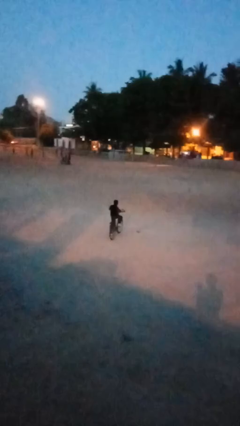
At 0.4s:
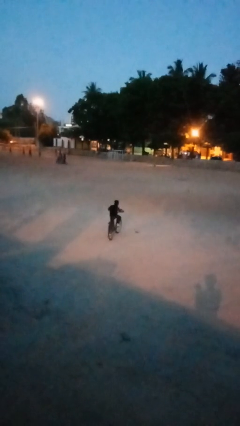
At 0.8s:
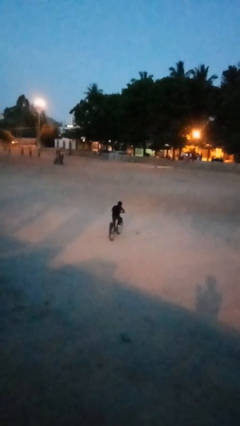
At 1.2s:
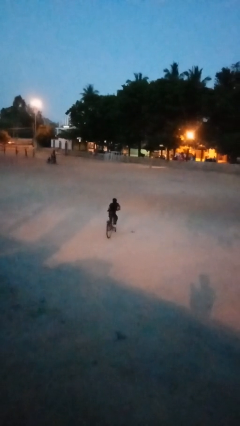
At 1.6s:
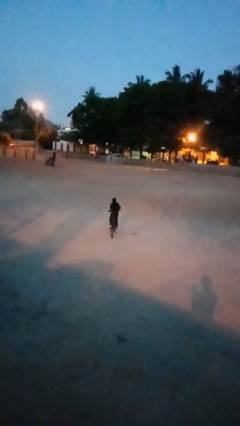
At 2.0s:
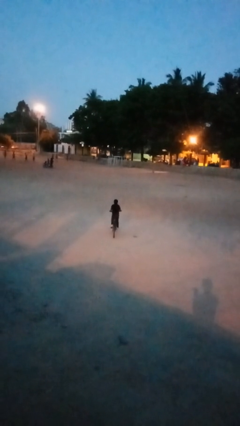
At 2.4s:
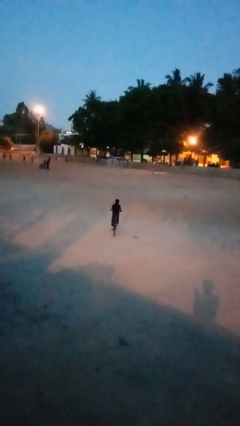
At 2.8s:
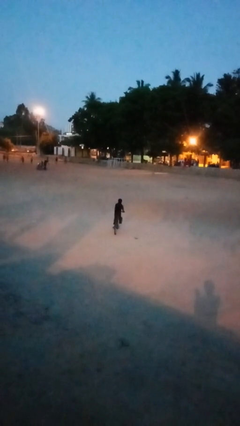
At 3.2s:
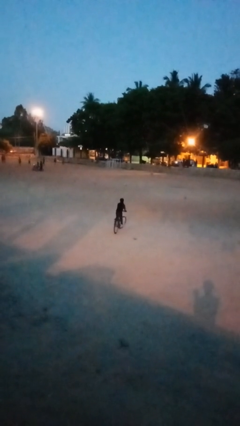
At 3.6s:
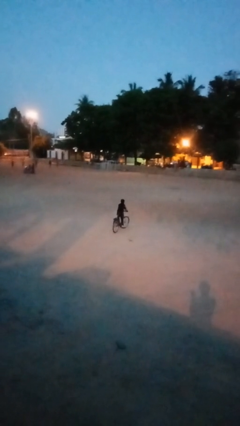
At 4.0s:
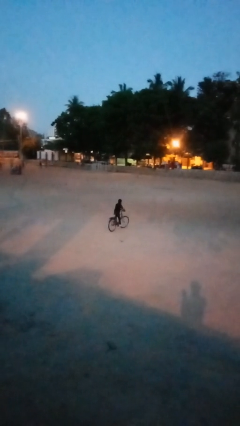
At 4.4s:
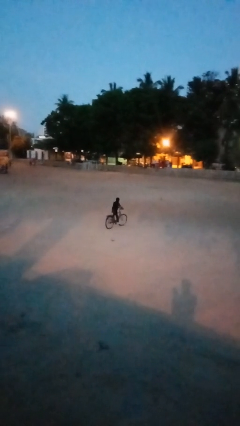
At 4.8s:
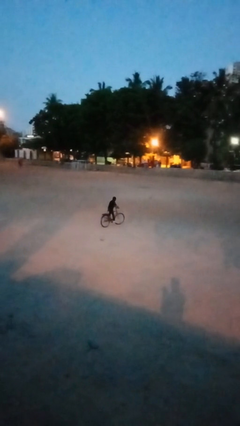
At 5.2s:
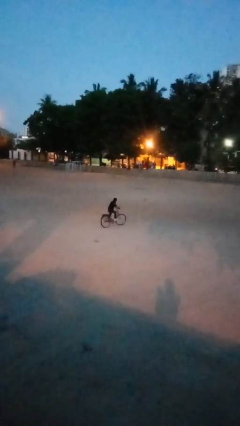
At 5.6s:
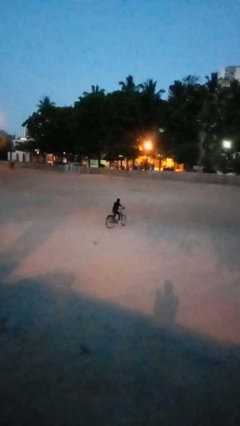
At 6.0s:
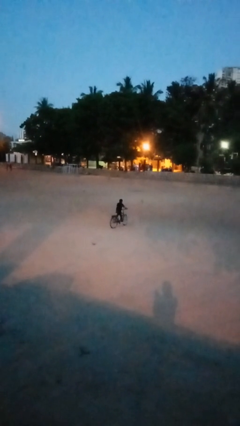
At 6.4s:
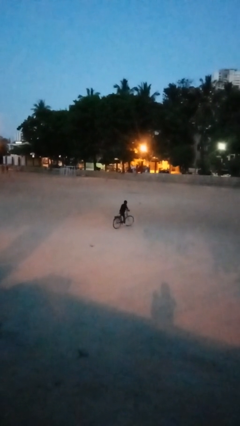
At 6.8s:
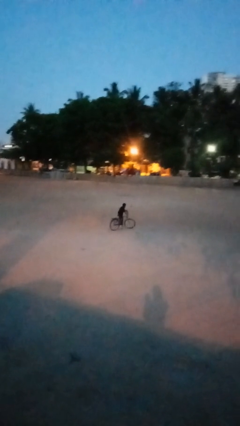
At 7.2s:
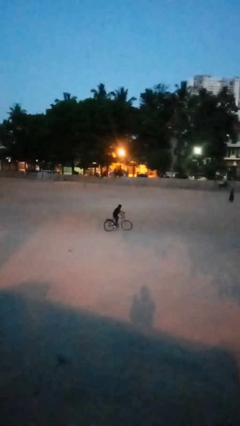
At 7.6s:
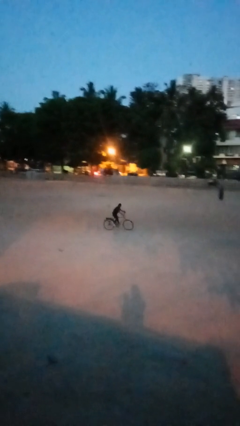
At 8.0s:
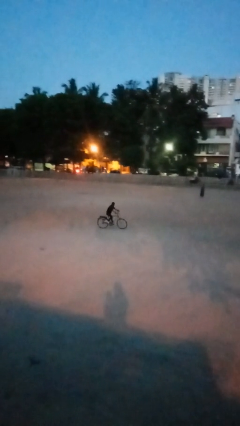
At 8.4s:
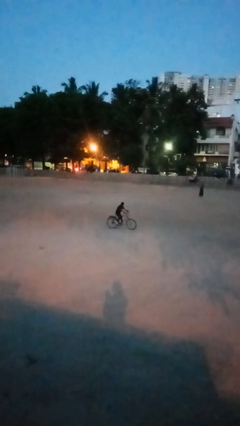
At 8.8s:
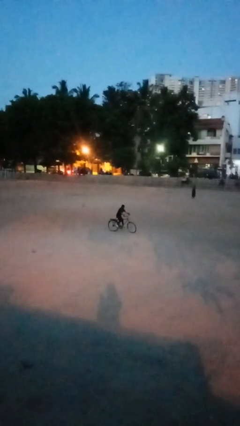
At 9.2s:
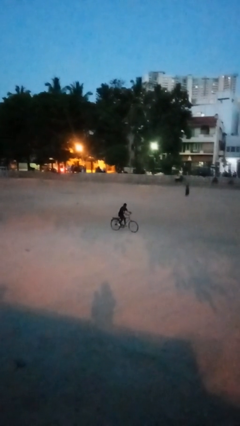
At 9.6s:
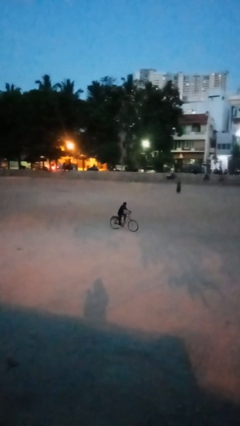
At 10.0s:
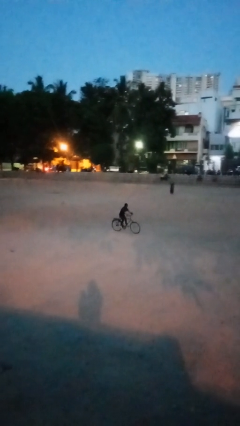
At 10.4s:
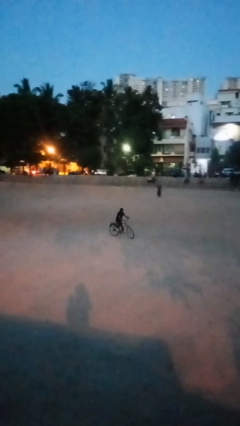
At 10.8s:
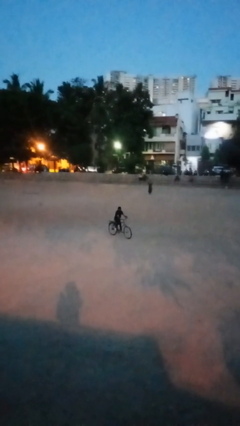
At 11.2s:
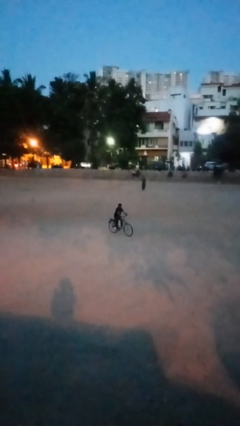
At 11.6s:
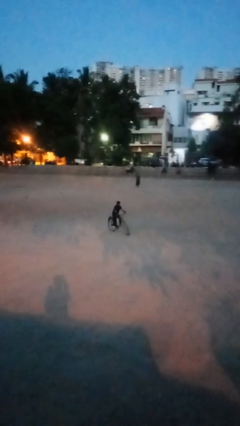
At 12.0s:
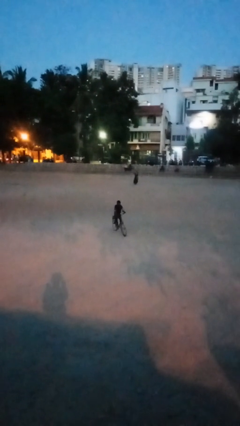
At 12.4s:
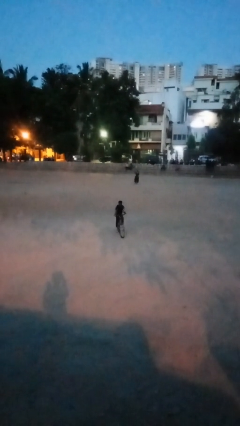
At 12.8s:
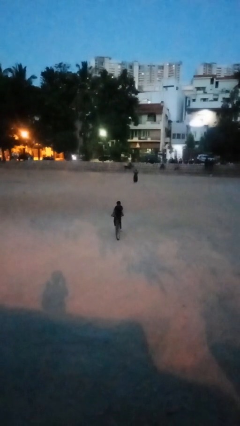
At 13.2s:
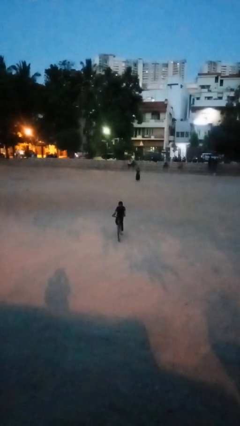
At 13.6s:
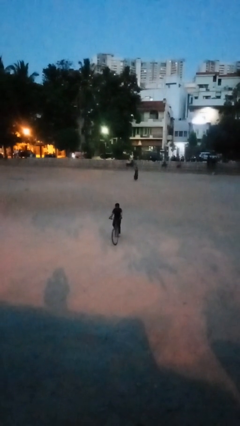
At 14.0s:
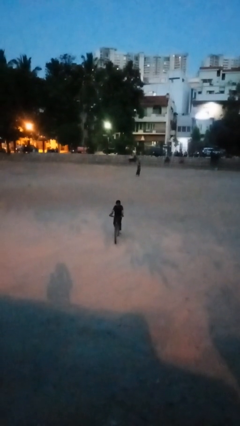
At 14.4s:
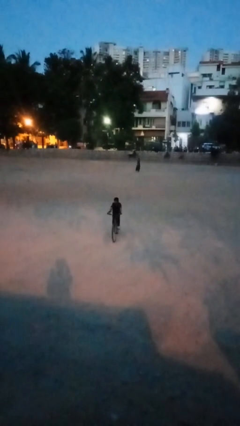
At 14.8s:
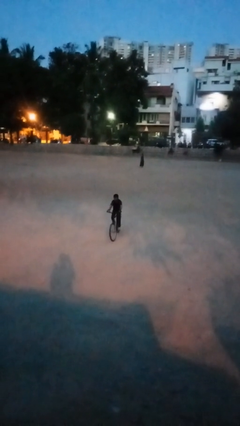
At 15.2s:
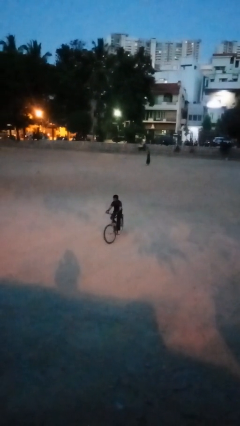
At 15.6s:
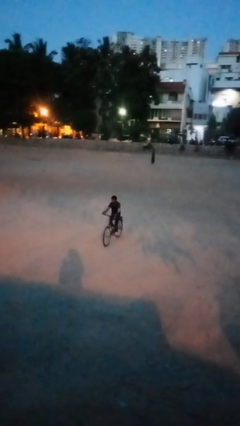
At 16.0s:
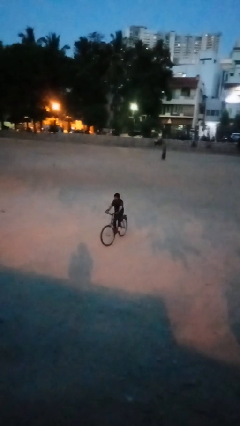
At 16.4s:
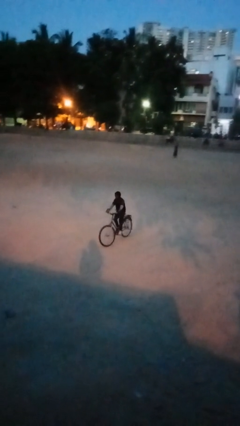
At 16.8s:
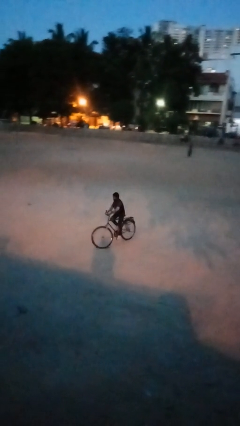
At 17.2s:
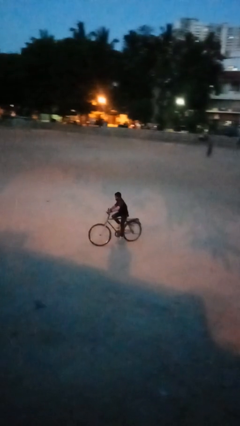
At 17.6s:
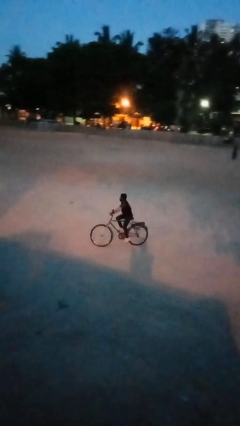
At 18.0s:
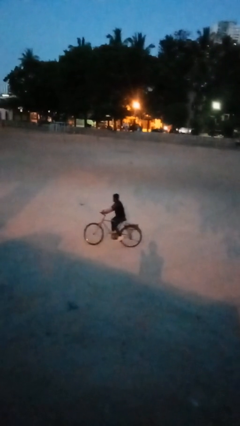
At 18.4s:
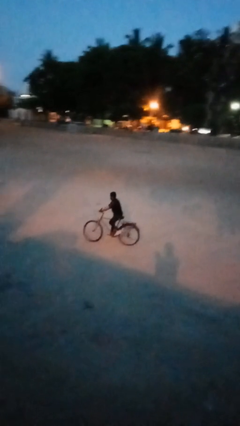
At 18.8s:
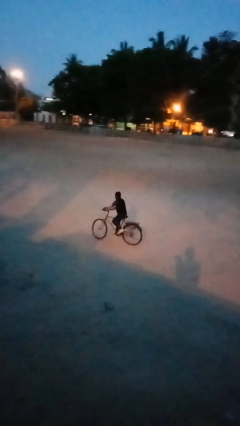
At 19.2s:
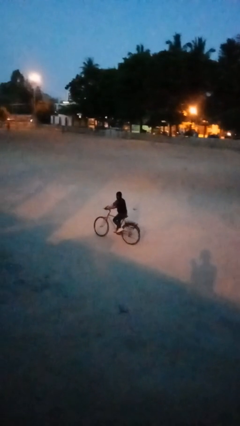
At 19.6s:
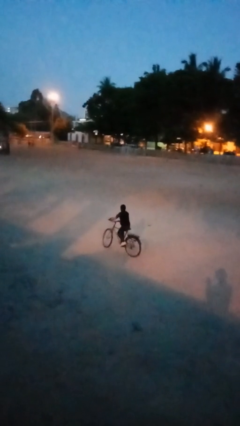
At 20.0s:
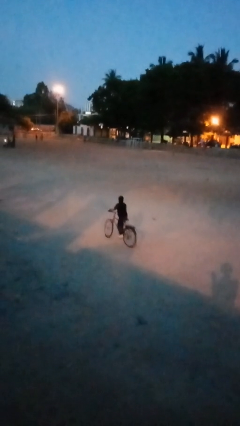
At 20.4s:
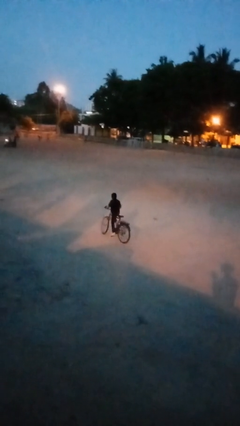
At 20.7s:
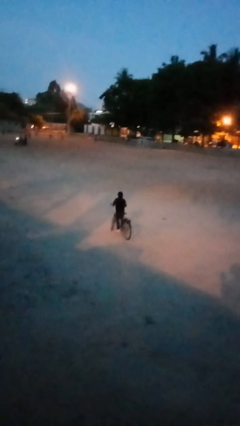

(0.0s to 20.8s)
person rides bicycle

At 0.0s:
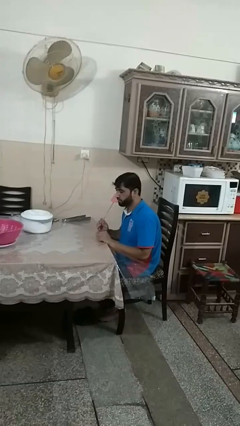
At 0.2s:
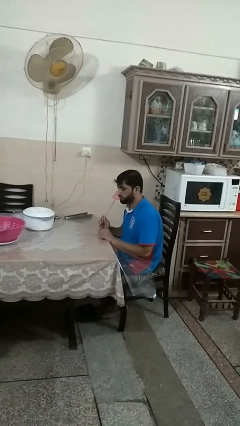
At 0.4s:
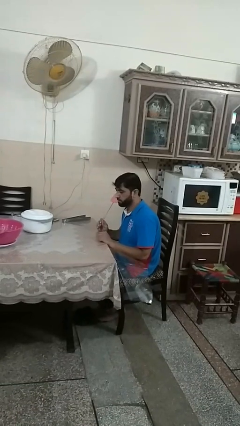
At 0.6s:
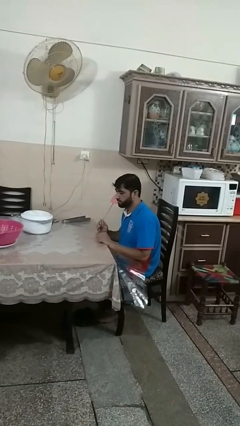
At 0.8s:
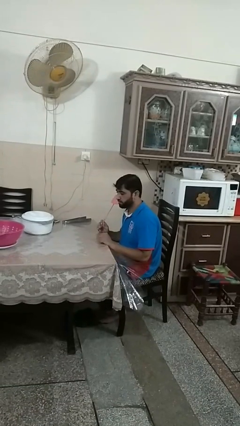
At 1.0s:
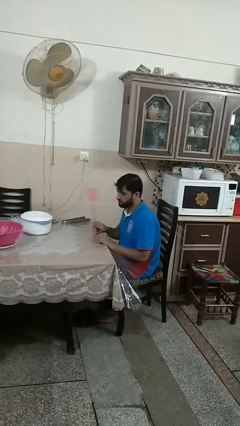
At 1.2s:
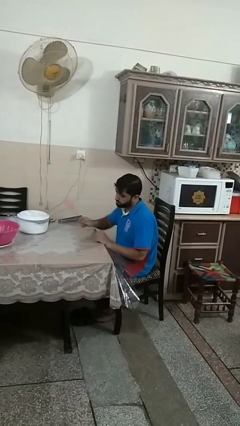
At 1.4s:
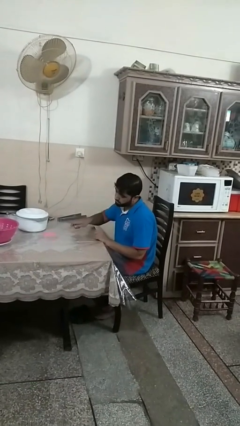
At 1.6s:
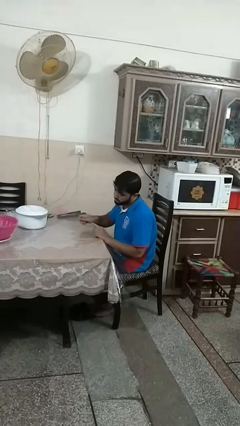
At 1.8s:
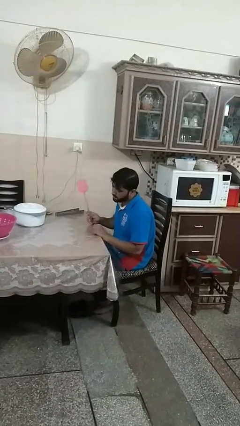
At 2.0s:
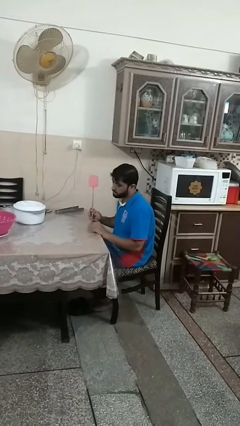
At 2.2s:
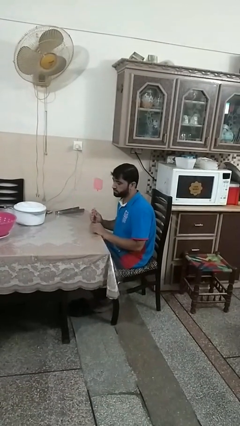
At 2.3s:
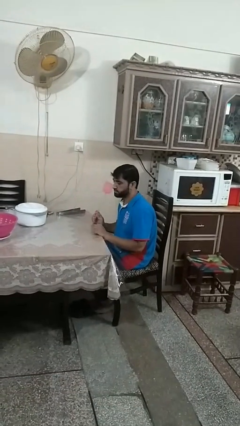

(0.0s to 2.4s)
person swats bug

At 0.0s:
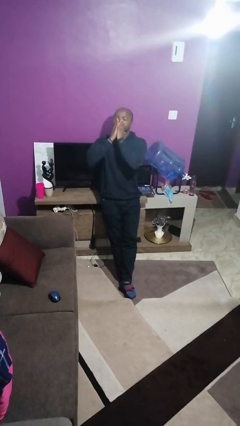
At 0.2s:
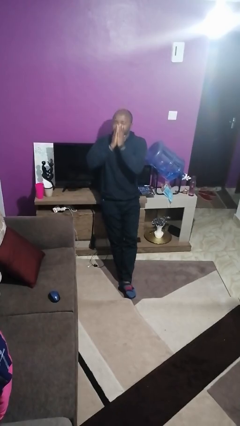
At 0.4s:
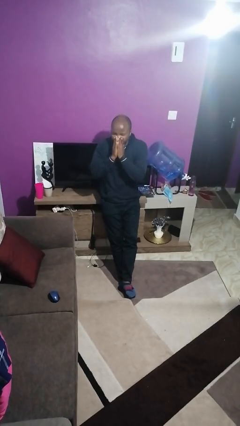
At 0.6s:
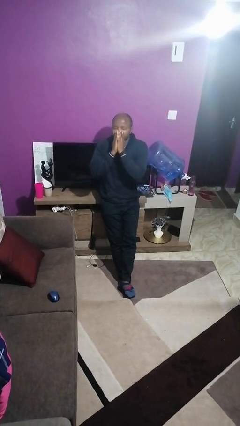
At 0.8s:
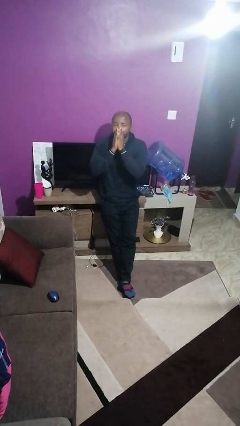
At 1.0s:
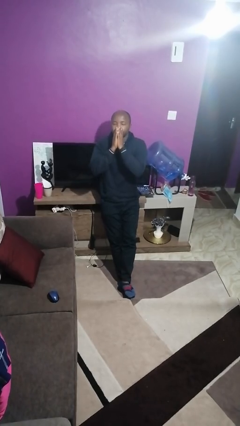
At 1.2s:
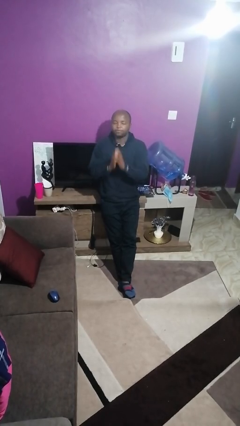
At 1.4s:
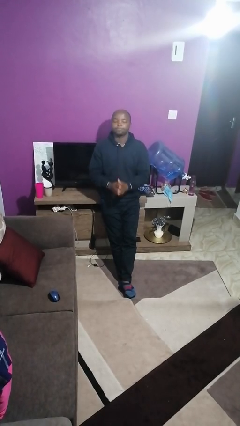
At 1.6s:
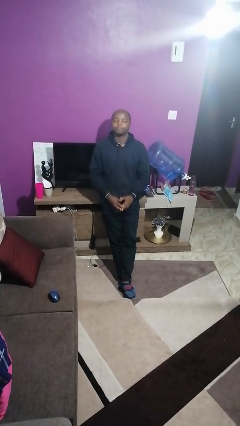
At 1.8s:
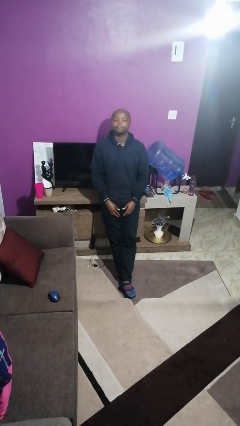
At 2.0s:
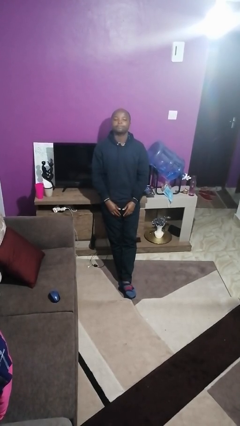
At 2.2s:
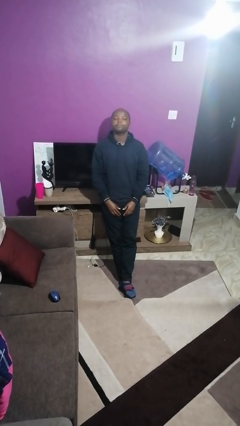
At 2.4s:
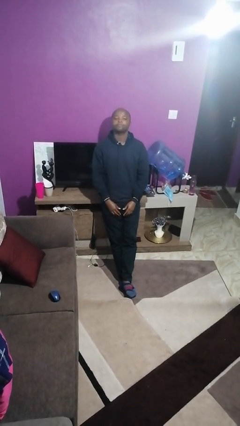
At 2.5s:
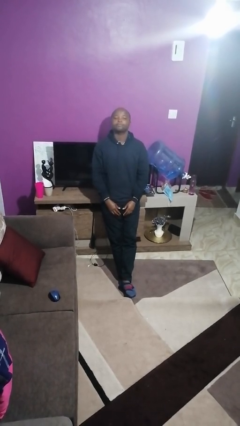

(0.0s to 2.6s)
person sneezes into hand

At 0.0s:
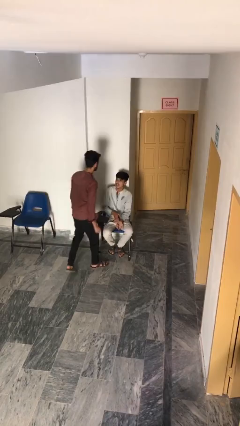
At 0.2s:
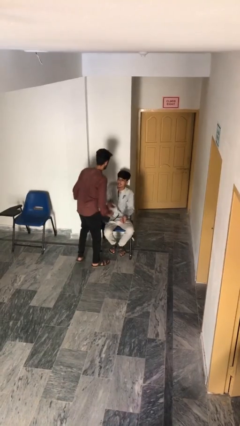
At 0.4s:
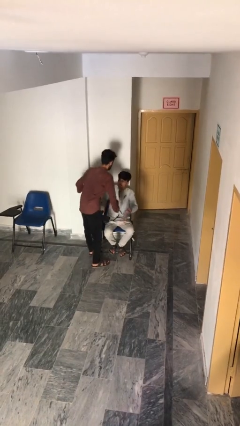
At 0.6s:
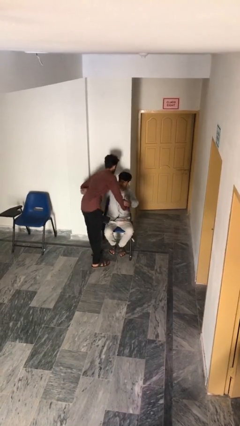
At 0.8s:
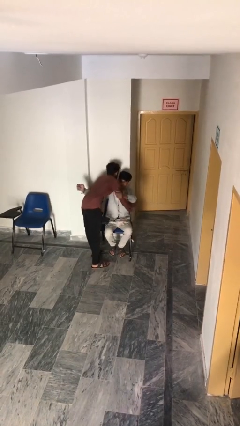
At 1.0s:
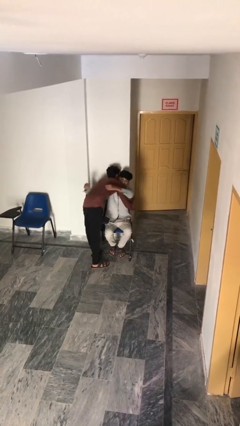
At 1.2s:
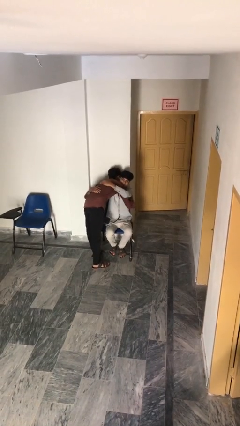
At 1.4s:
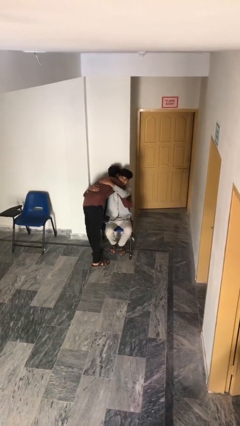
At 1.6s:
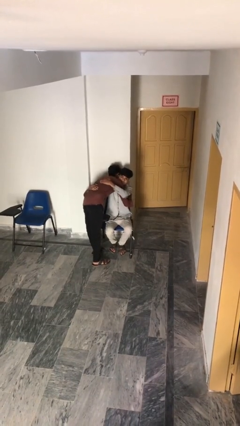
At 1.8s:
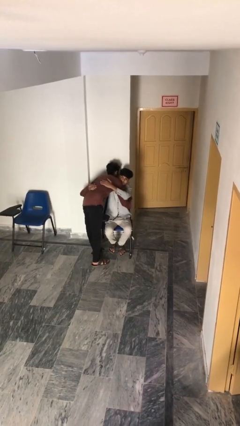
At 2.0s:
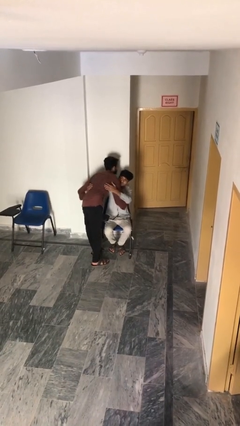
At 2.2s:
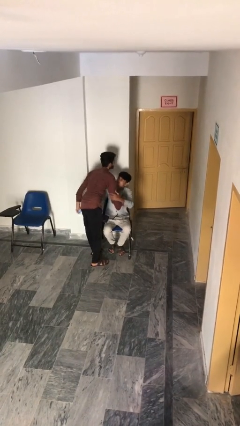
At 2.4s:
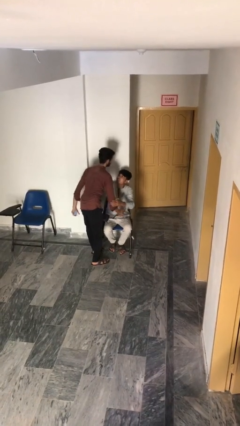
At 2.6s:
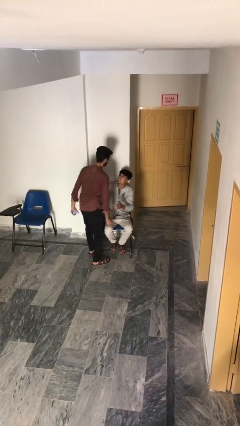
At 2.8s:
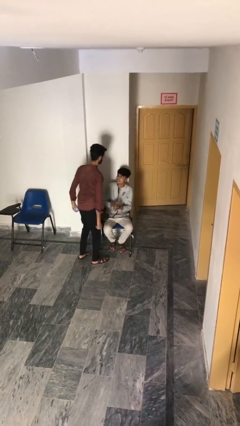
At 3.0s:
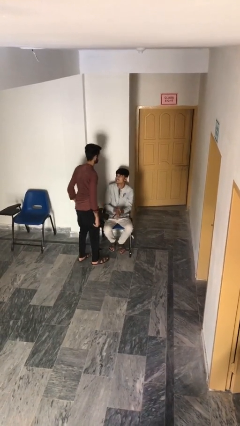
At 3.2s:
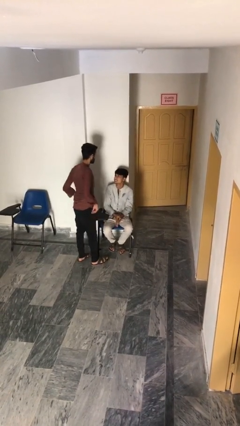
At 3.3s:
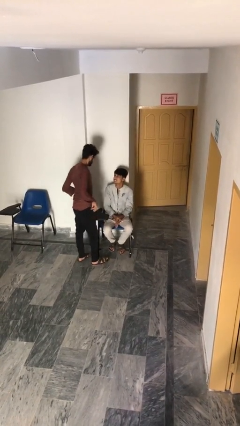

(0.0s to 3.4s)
person embraces person
